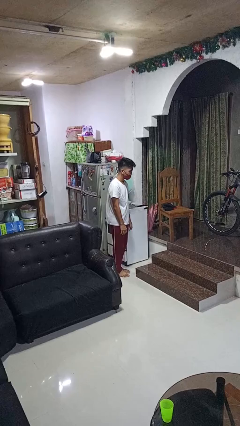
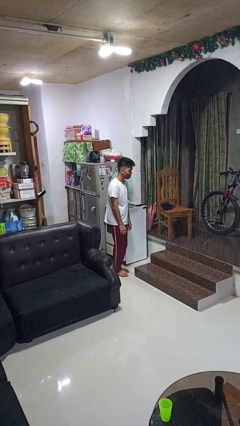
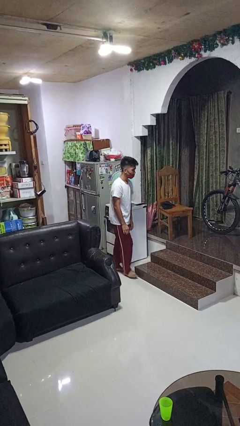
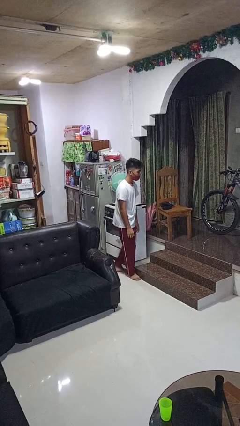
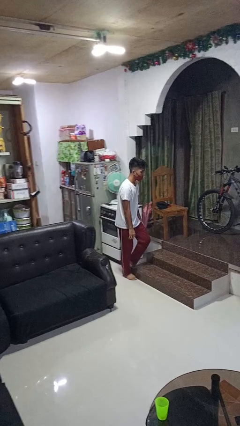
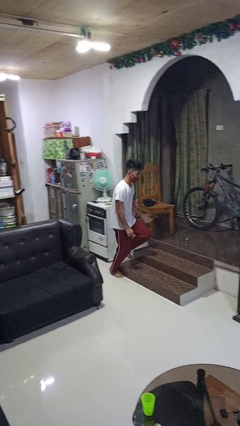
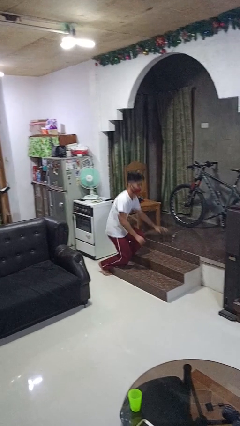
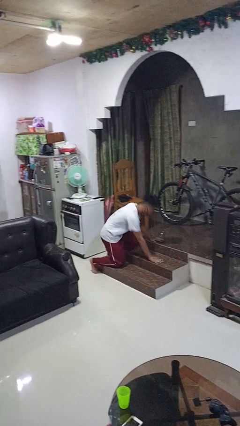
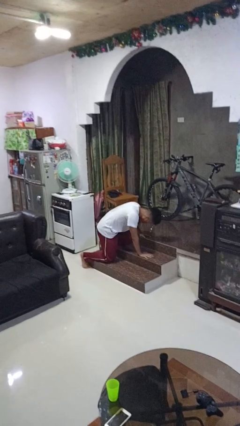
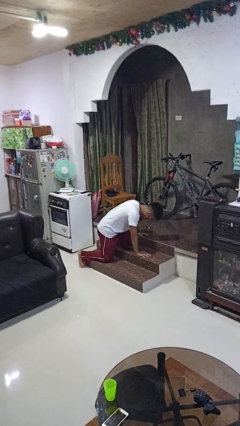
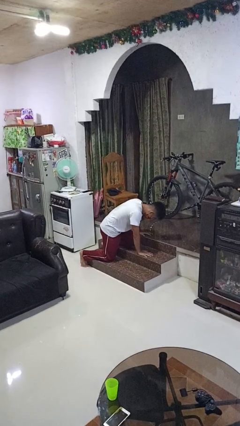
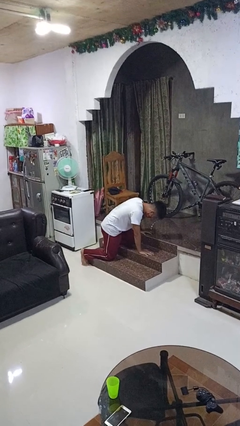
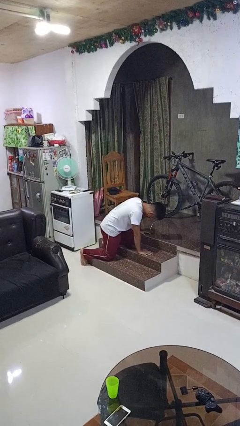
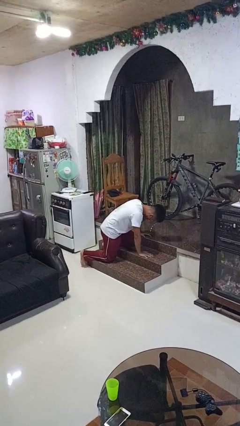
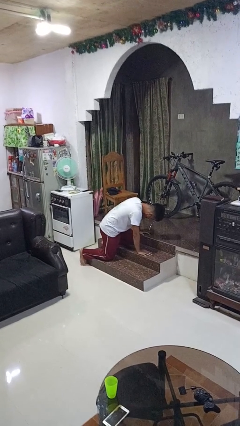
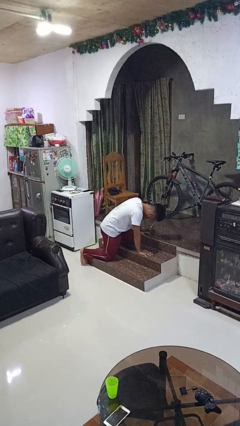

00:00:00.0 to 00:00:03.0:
person trips on object on floor

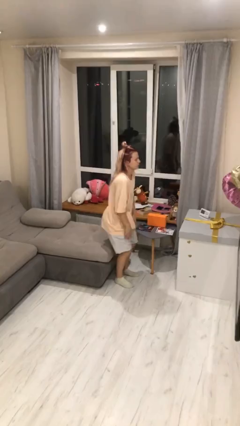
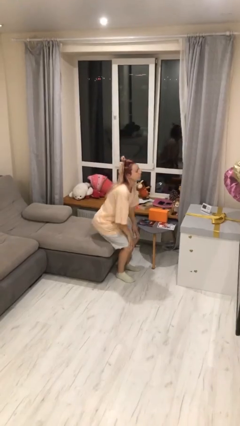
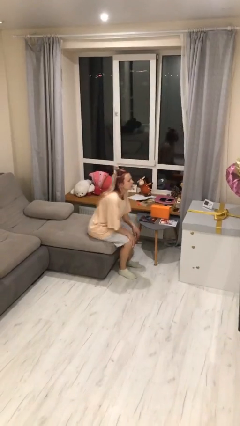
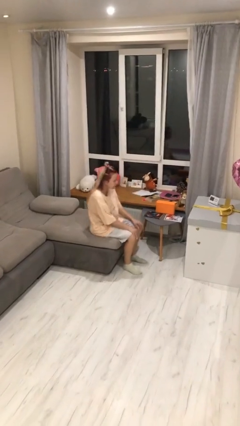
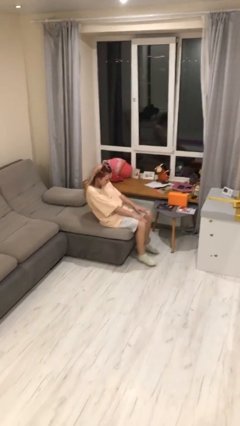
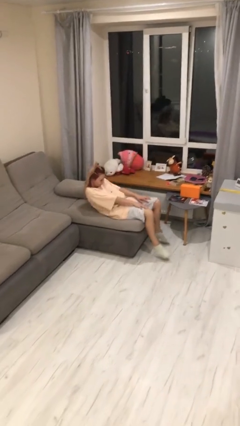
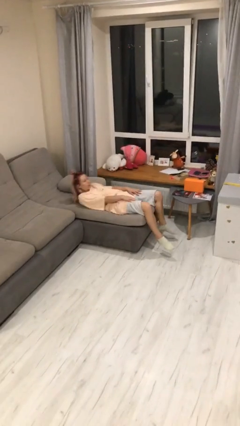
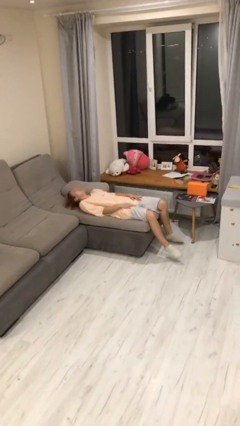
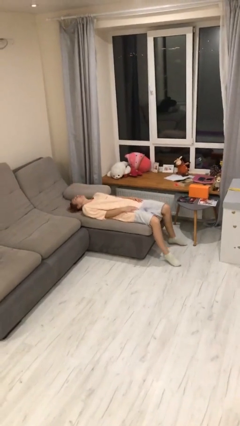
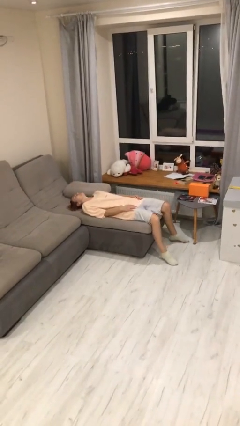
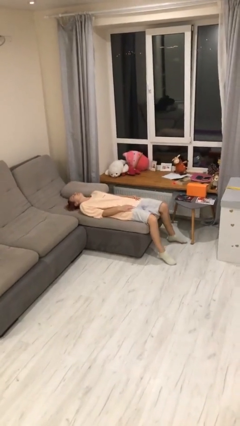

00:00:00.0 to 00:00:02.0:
person lies down on couch

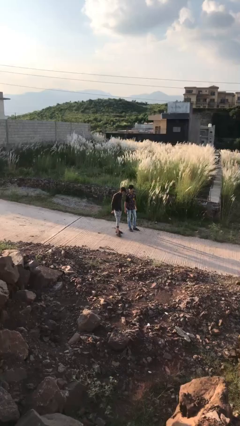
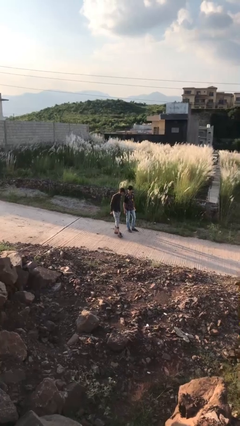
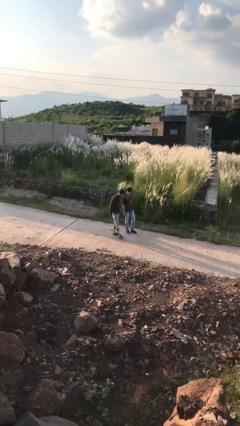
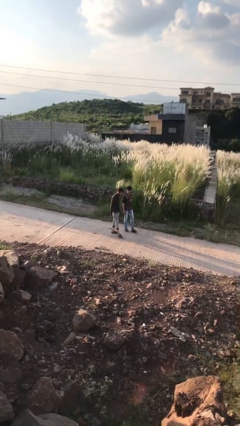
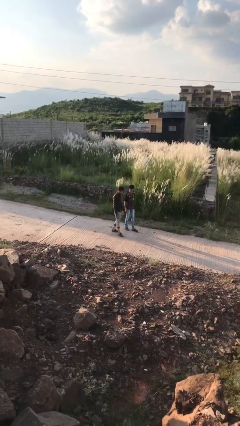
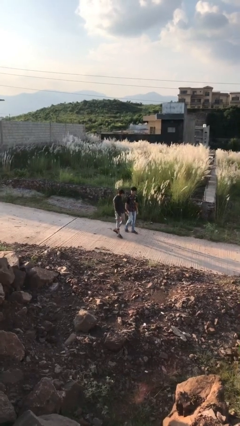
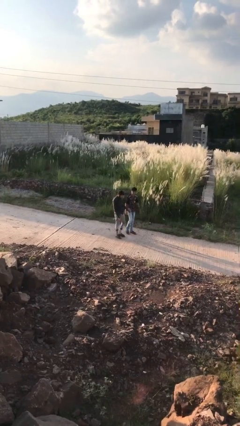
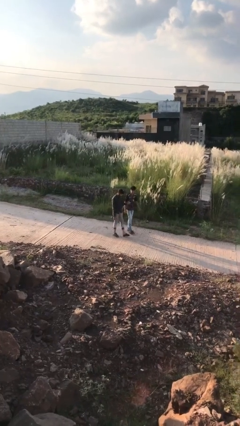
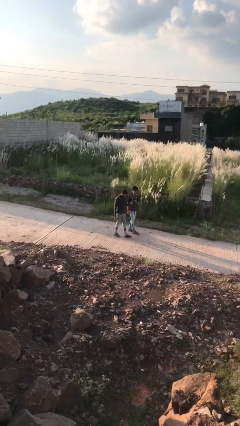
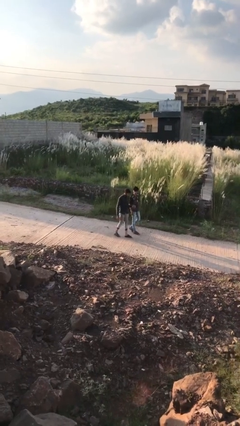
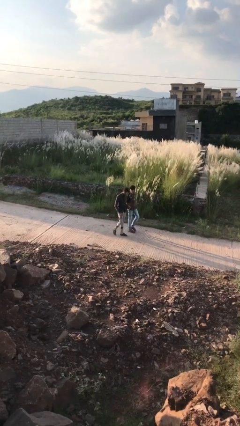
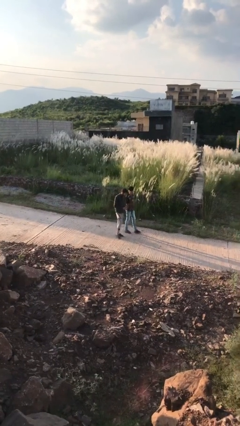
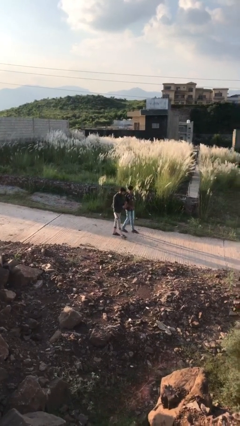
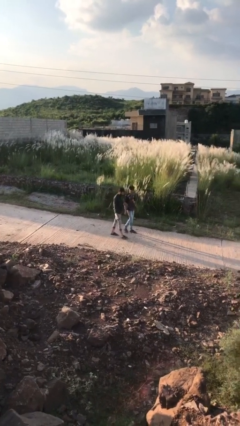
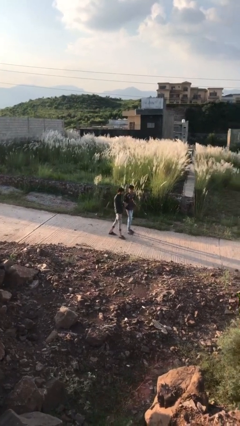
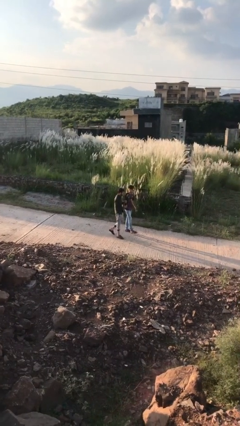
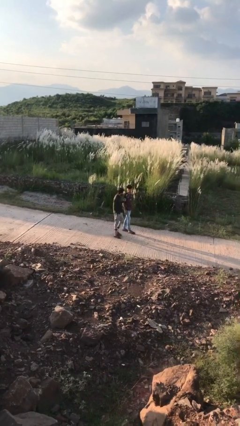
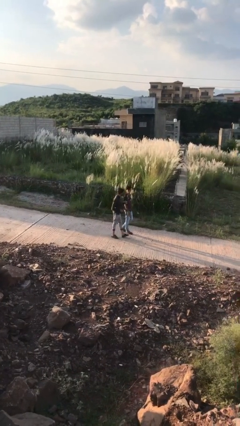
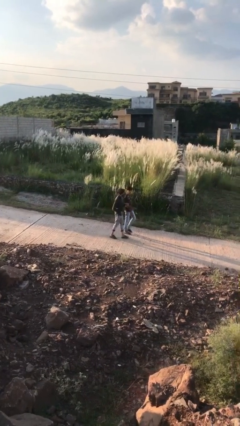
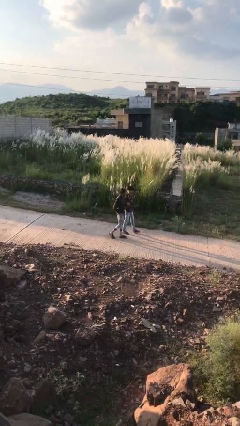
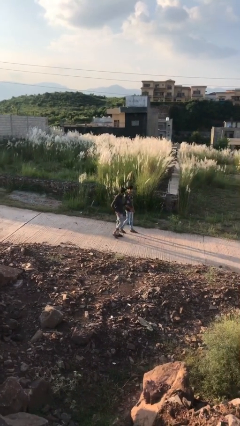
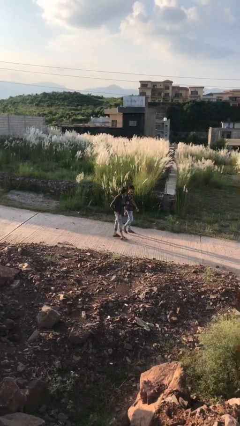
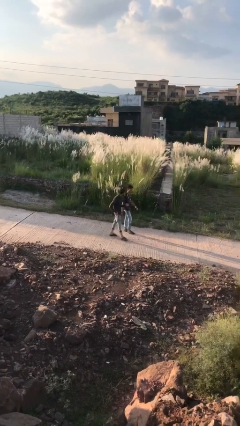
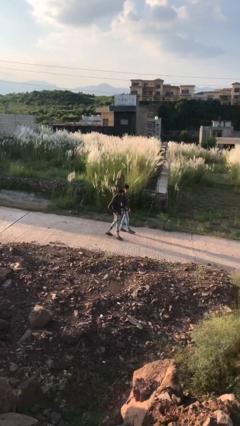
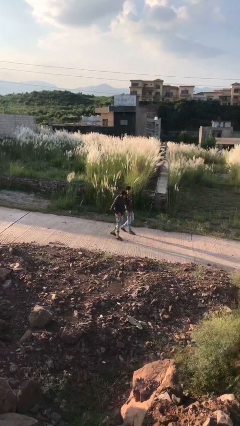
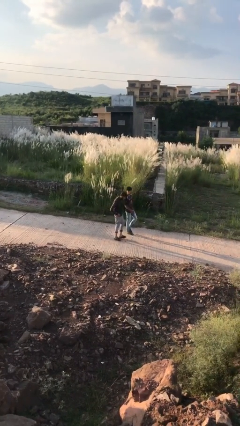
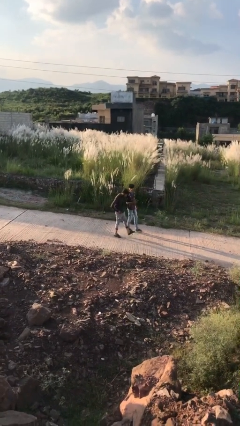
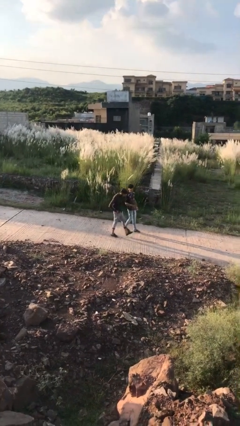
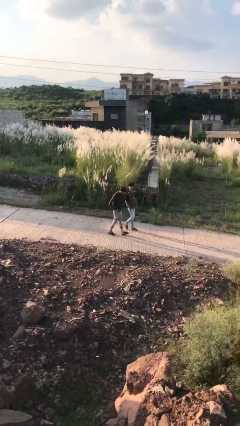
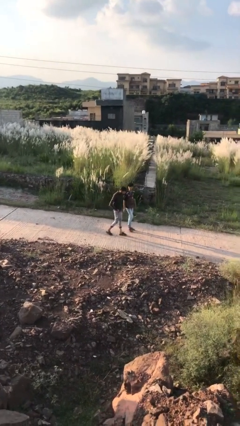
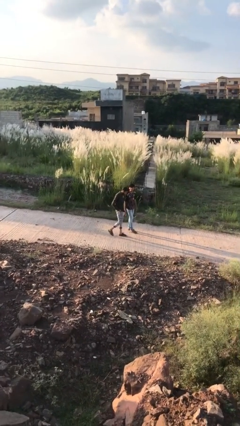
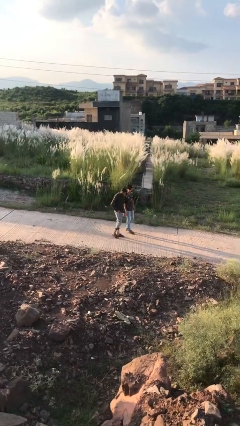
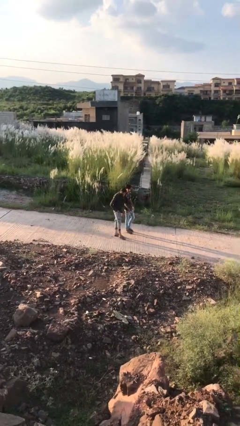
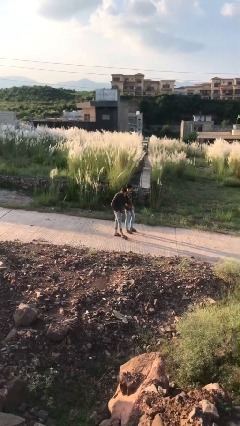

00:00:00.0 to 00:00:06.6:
person talks to person

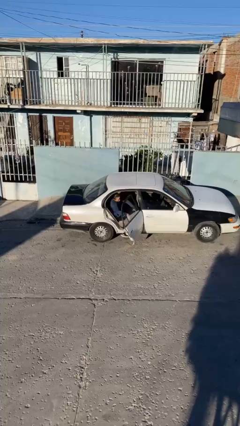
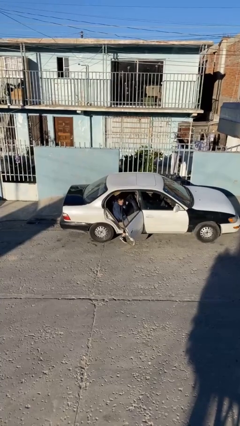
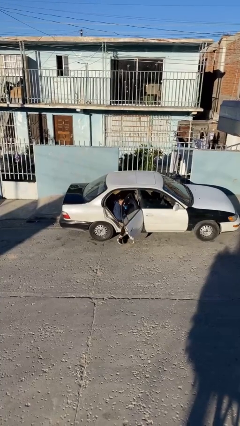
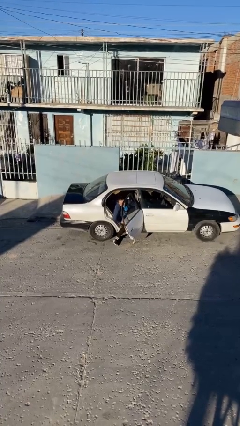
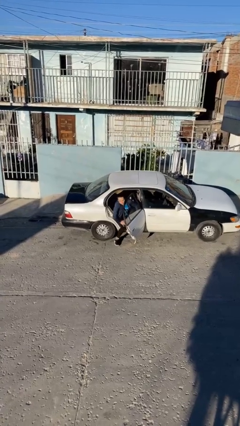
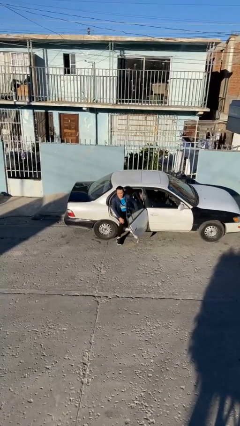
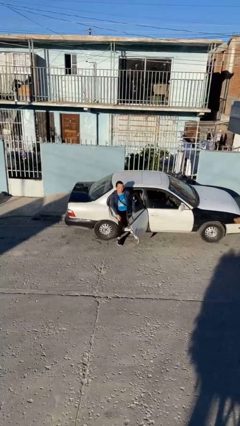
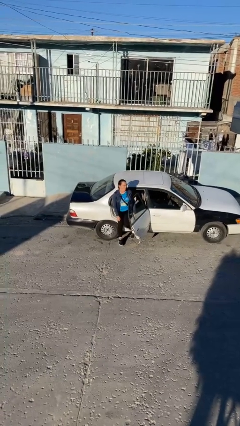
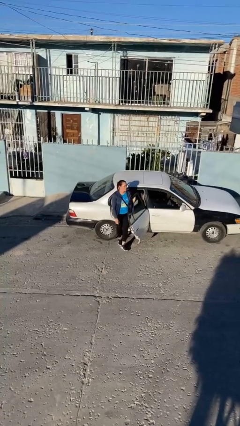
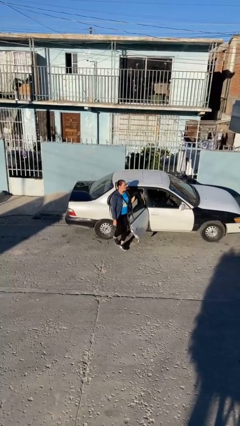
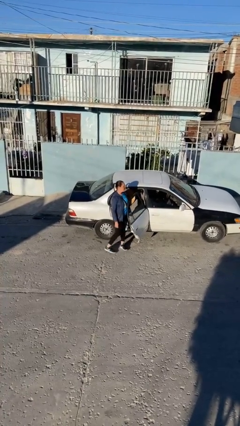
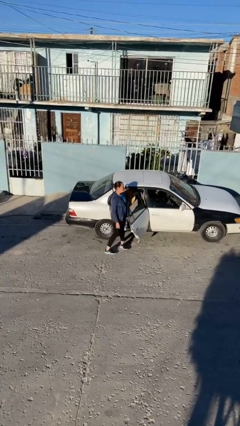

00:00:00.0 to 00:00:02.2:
person exits car

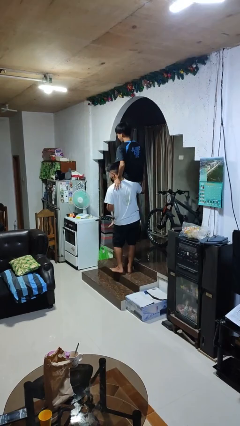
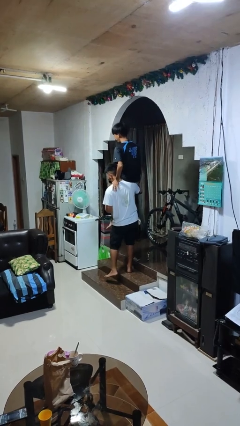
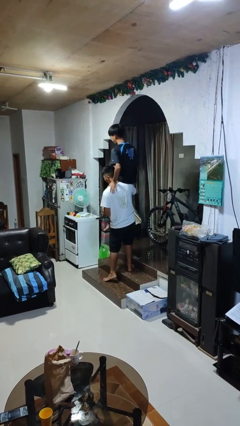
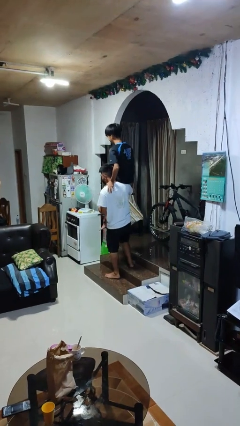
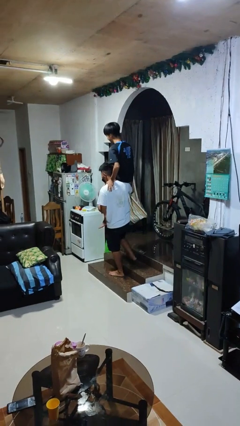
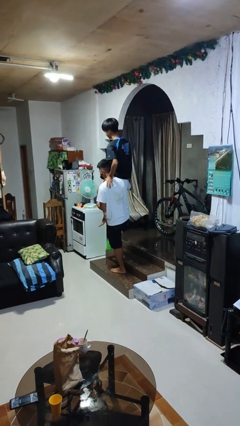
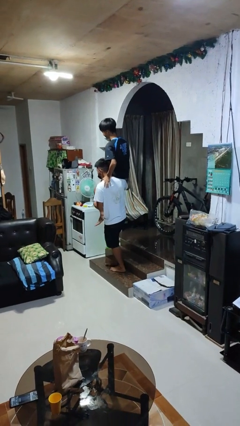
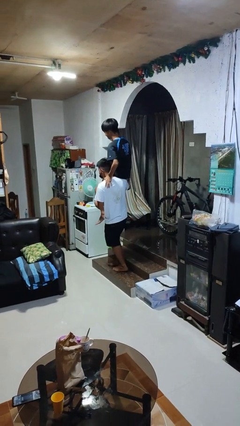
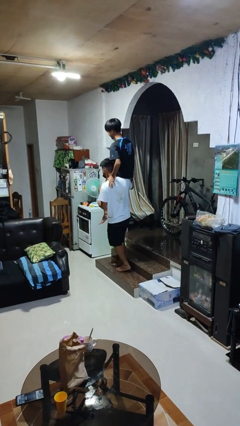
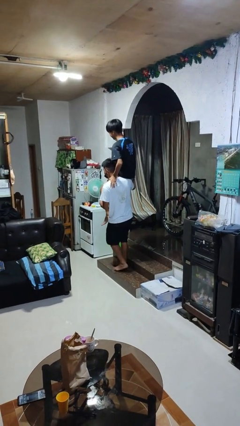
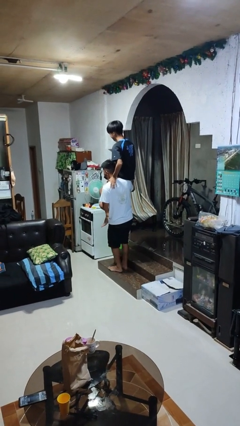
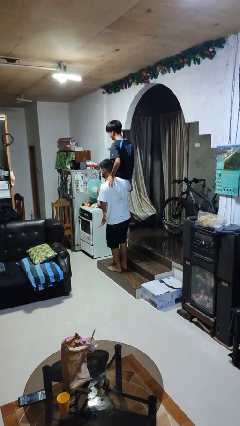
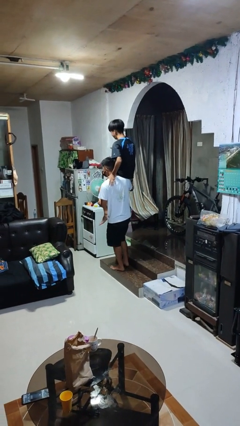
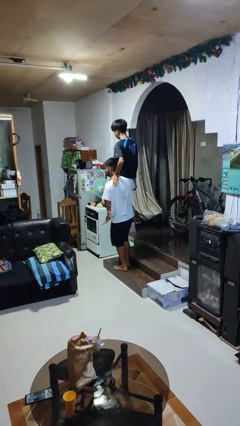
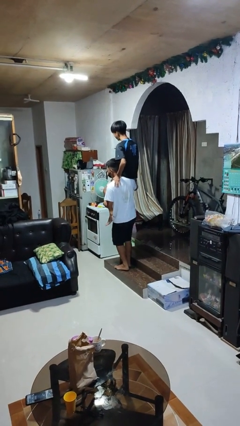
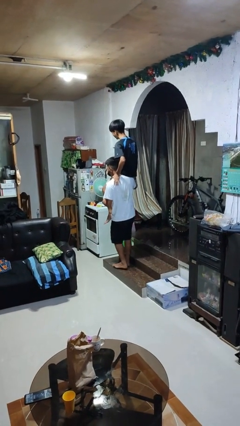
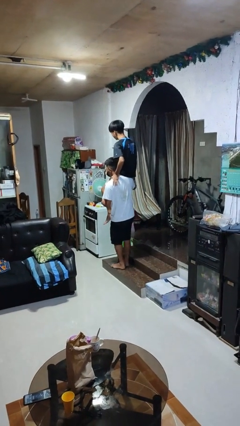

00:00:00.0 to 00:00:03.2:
person carries person on shoulders

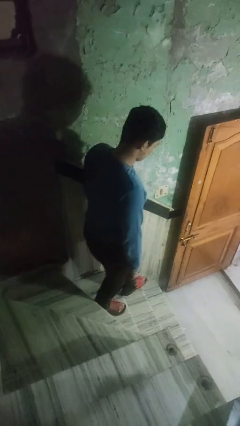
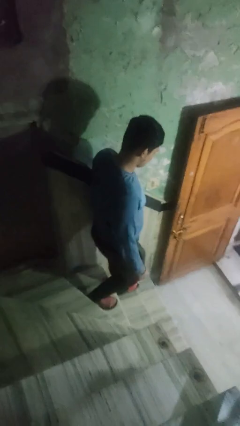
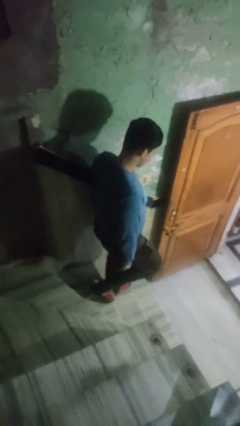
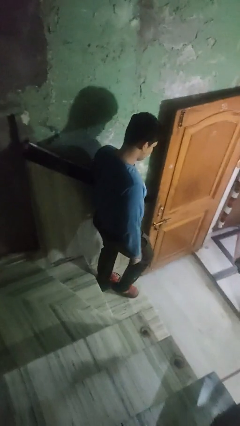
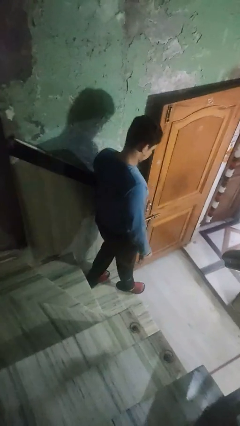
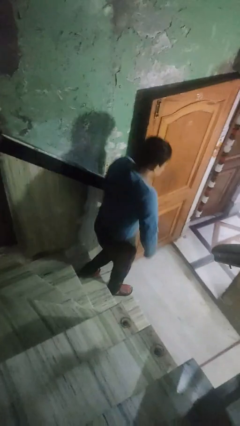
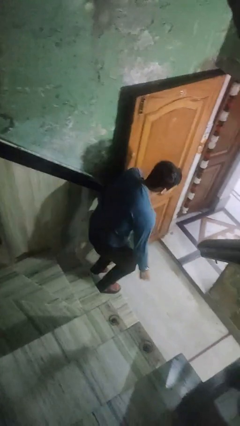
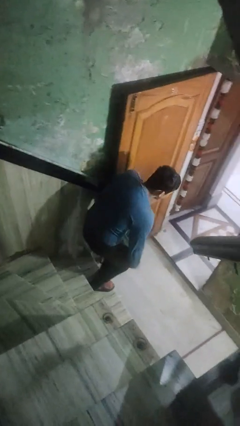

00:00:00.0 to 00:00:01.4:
person climbs down stairs
